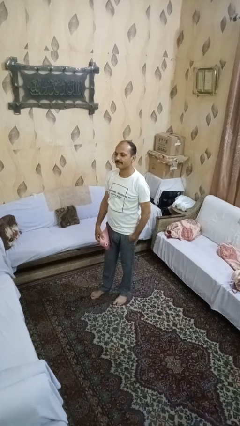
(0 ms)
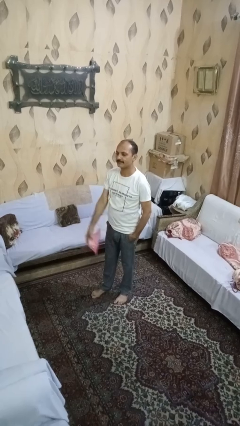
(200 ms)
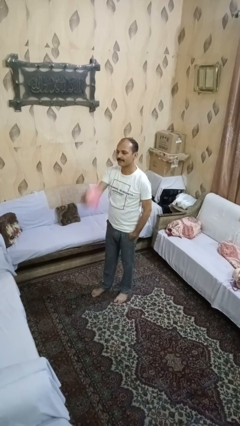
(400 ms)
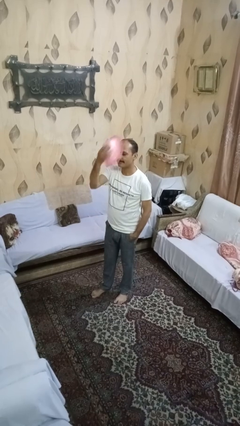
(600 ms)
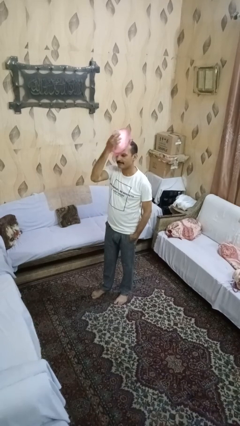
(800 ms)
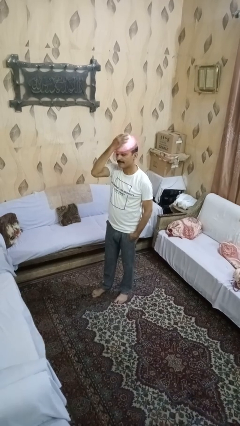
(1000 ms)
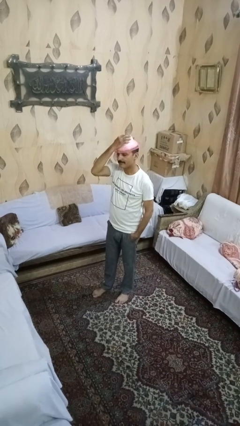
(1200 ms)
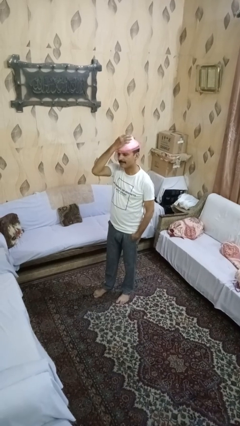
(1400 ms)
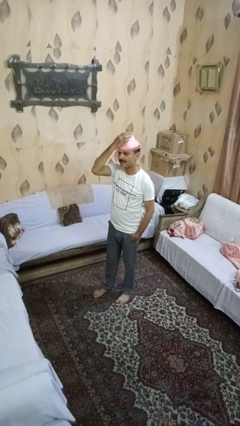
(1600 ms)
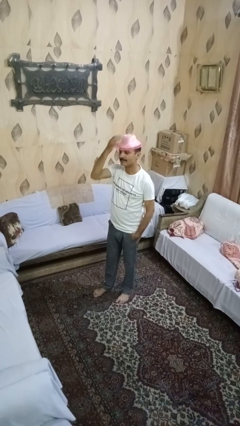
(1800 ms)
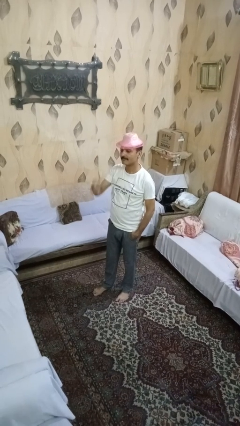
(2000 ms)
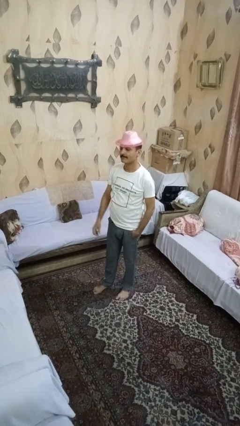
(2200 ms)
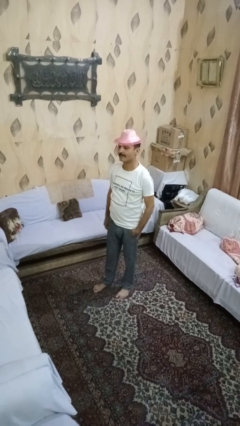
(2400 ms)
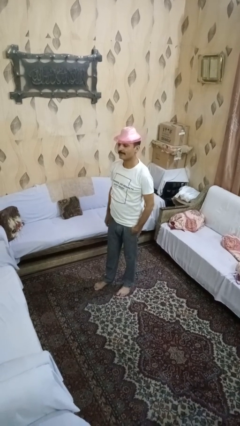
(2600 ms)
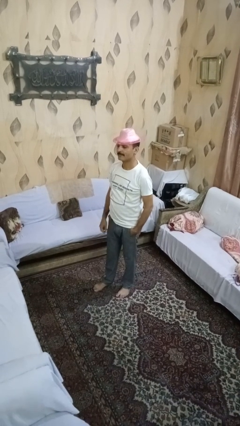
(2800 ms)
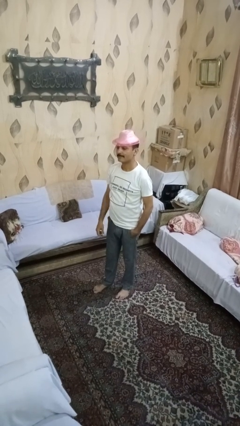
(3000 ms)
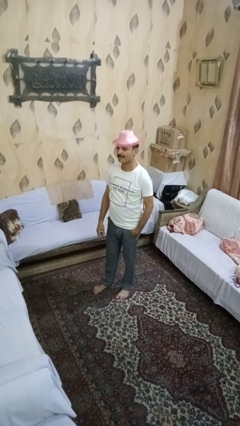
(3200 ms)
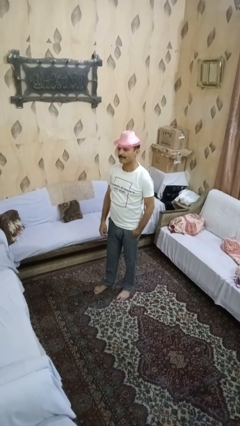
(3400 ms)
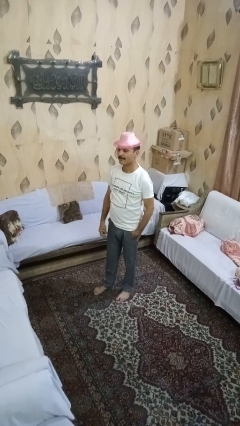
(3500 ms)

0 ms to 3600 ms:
person puts on hat

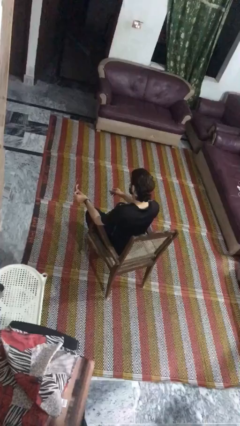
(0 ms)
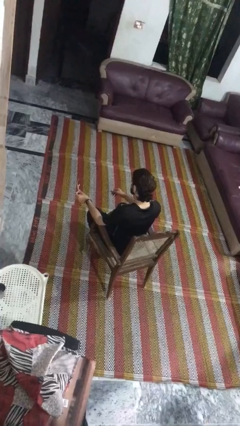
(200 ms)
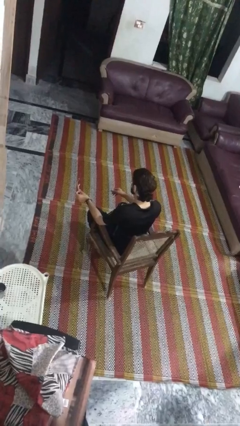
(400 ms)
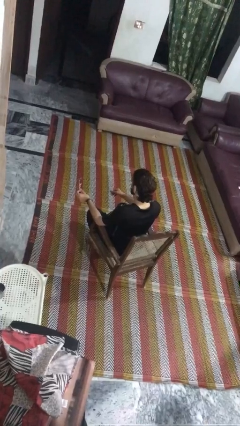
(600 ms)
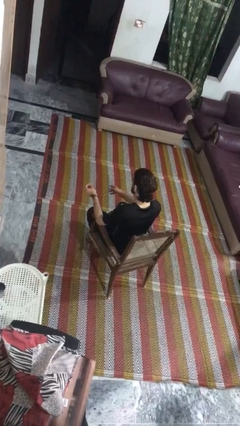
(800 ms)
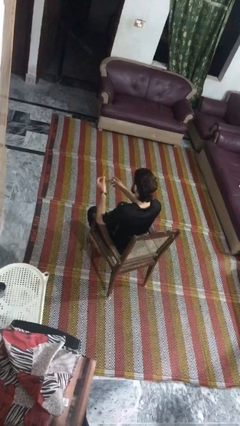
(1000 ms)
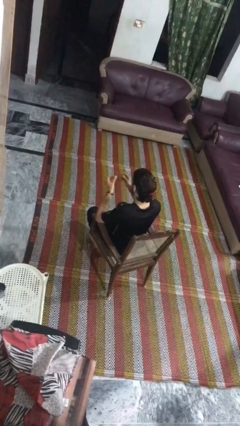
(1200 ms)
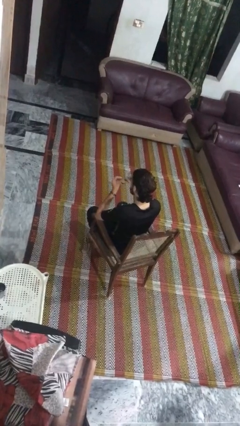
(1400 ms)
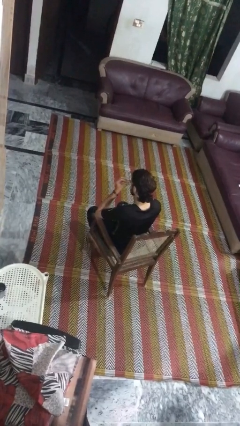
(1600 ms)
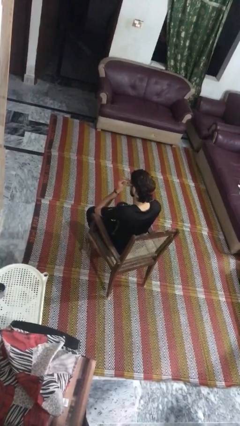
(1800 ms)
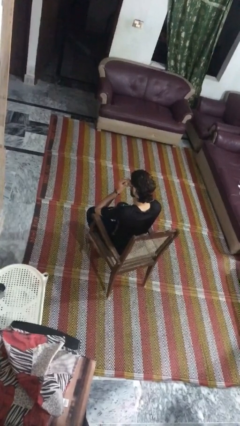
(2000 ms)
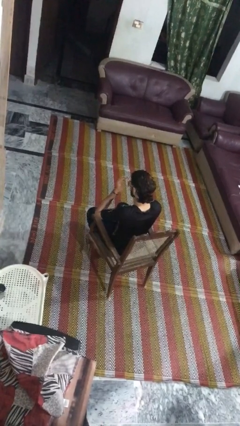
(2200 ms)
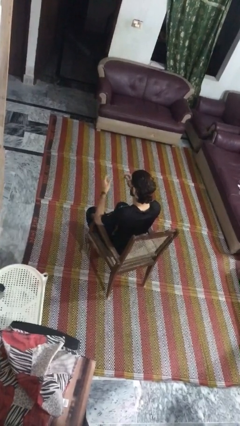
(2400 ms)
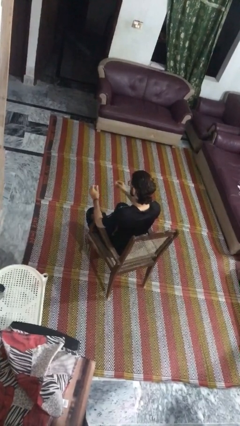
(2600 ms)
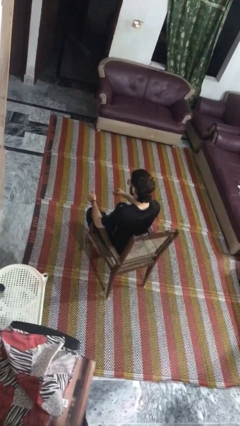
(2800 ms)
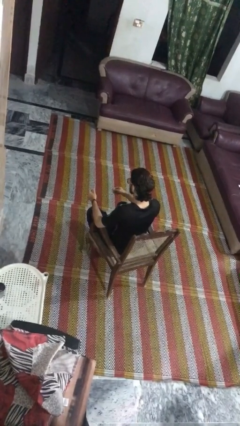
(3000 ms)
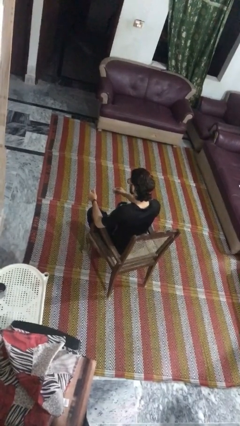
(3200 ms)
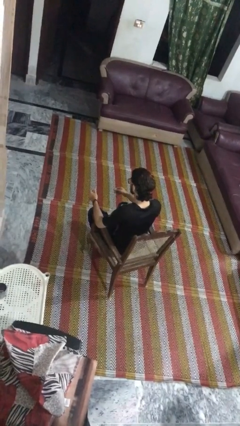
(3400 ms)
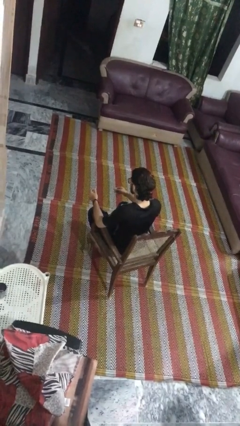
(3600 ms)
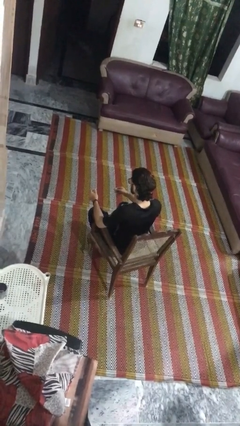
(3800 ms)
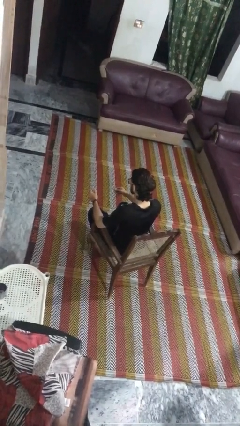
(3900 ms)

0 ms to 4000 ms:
person puts on glasses

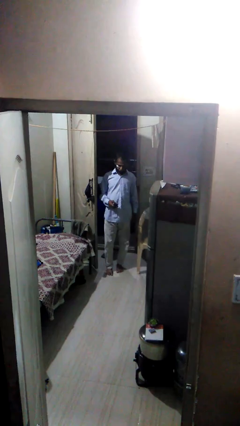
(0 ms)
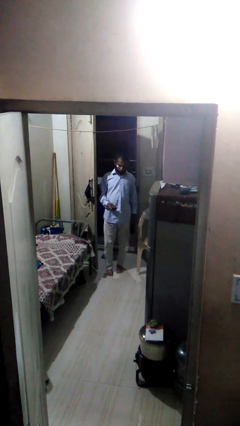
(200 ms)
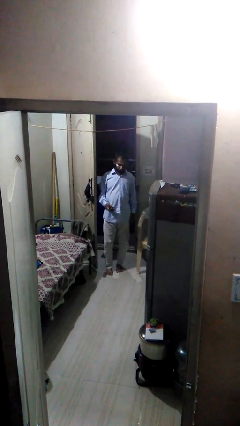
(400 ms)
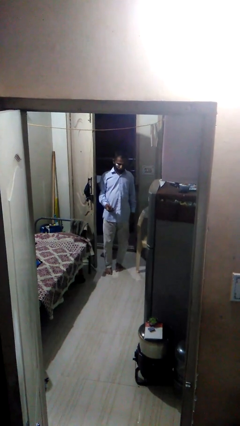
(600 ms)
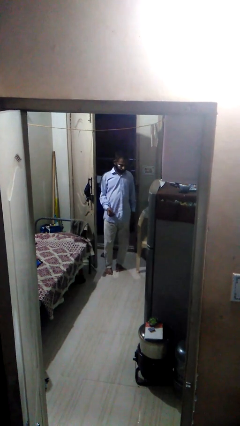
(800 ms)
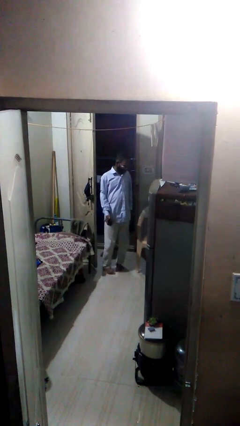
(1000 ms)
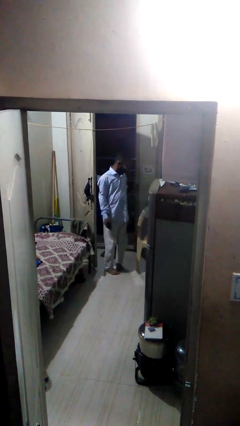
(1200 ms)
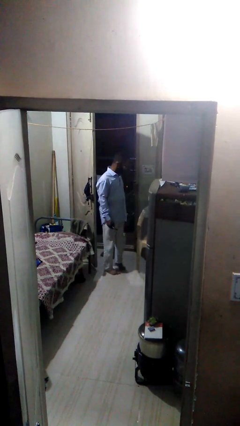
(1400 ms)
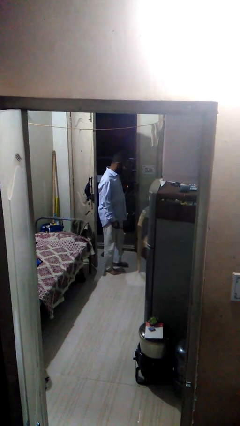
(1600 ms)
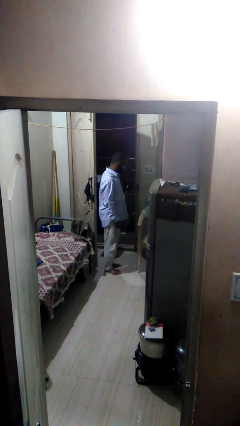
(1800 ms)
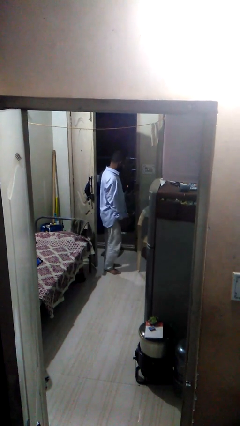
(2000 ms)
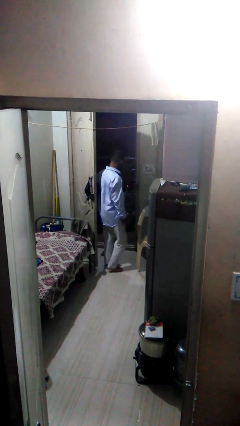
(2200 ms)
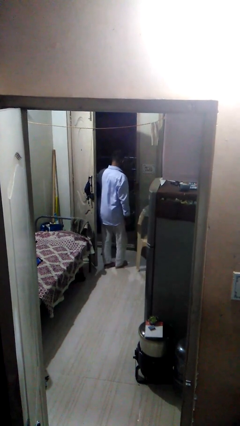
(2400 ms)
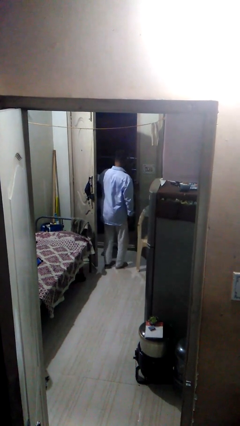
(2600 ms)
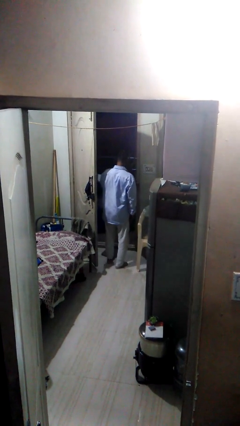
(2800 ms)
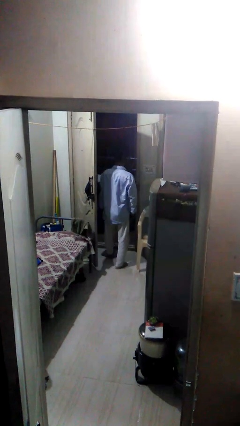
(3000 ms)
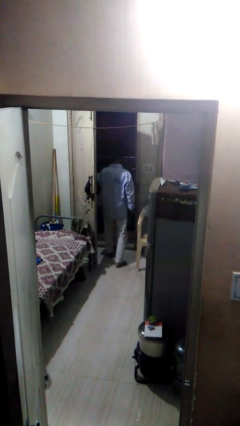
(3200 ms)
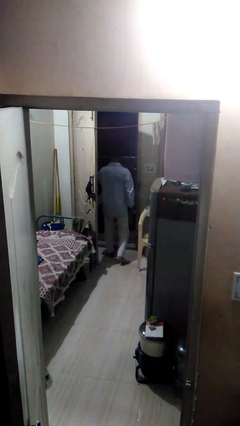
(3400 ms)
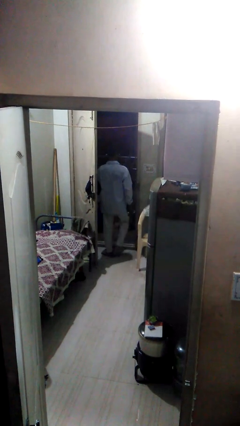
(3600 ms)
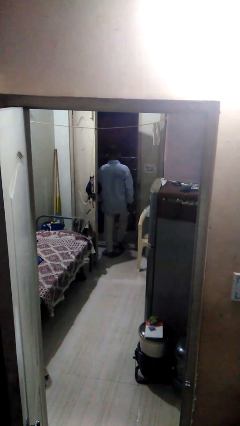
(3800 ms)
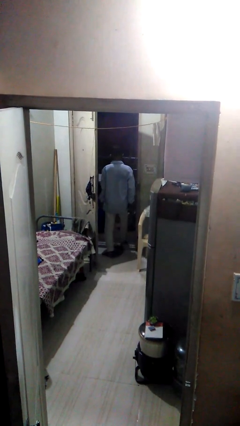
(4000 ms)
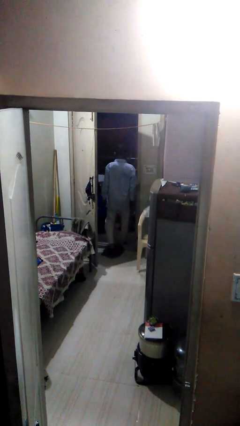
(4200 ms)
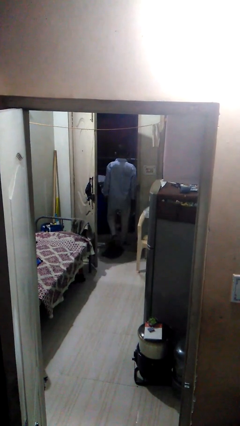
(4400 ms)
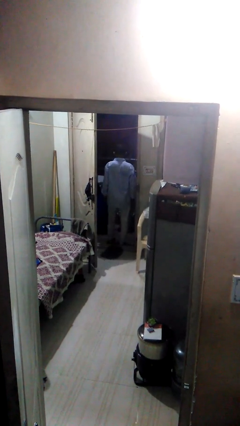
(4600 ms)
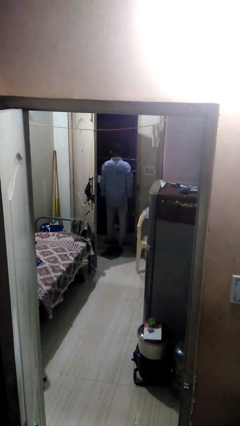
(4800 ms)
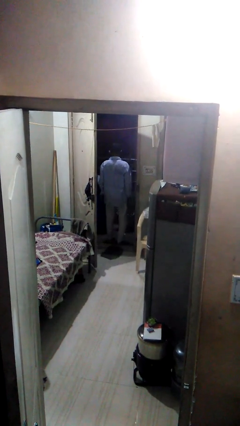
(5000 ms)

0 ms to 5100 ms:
person exits scene through structure

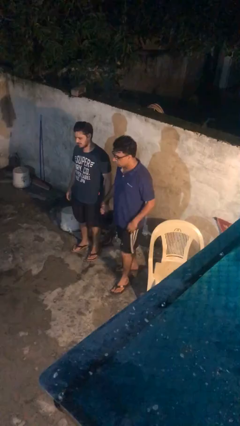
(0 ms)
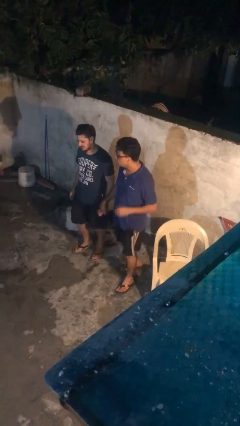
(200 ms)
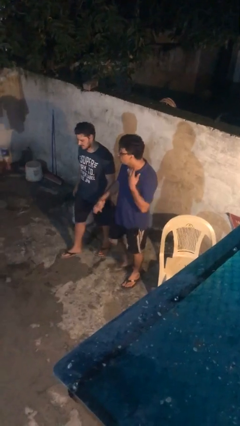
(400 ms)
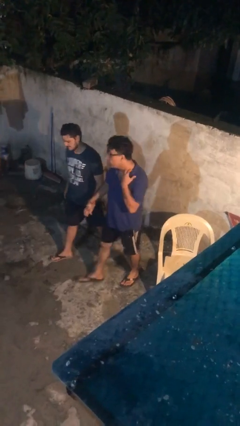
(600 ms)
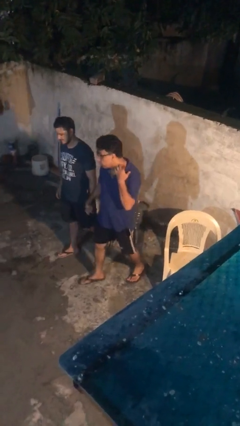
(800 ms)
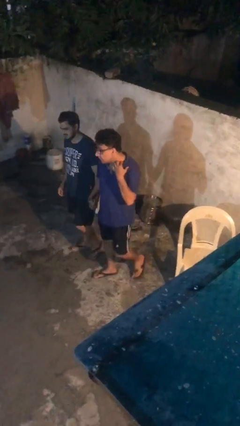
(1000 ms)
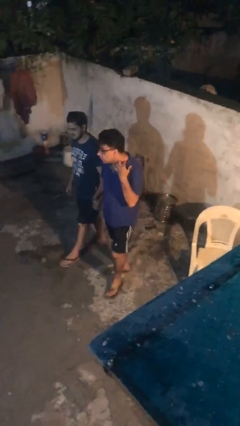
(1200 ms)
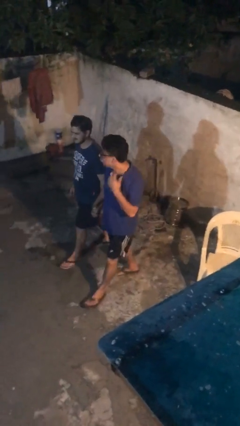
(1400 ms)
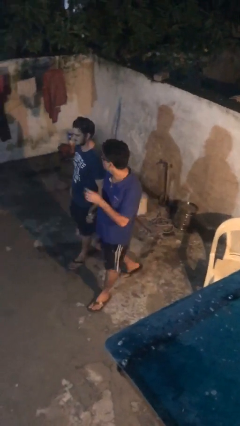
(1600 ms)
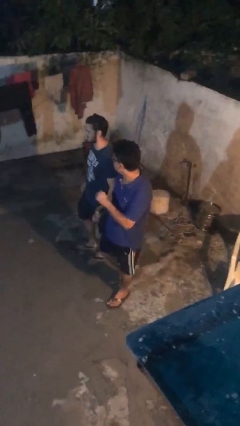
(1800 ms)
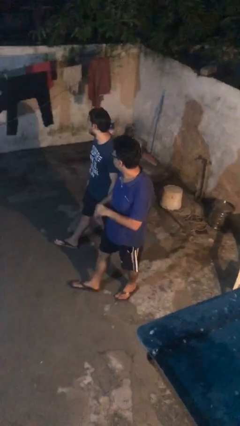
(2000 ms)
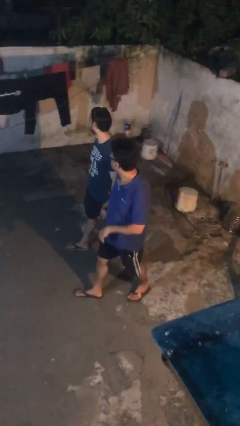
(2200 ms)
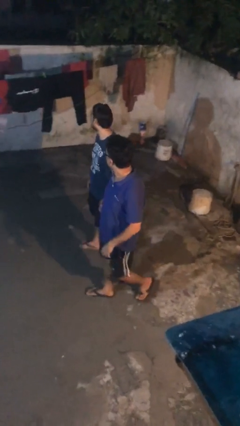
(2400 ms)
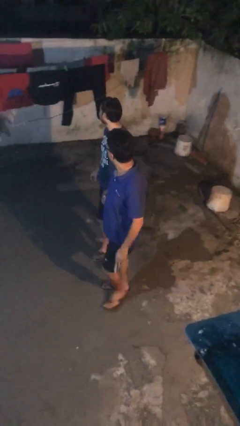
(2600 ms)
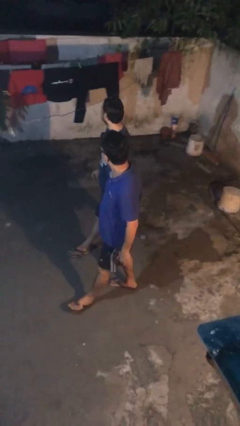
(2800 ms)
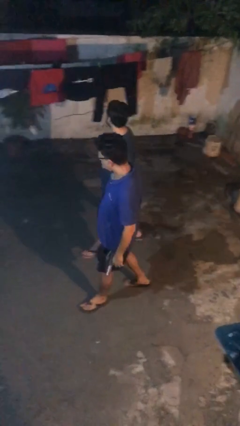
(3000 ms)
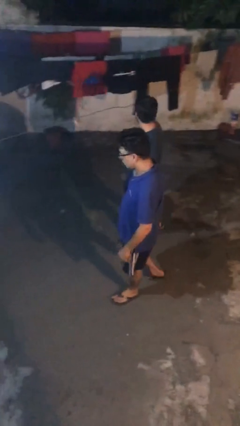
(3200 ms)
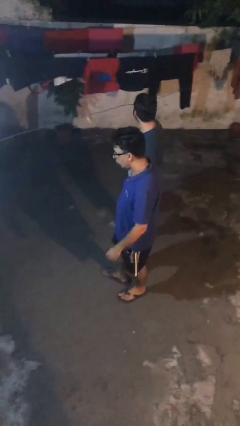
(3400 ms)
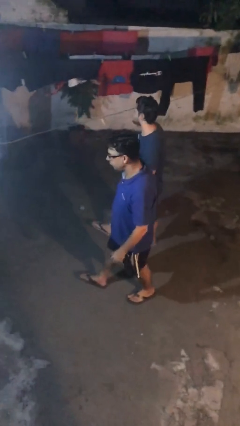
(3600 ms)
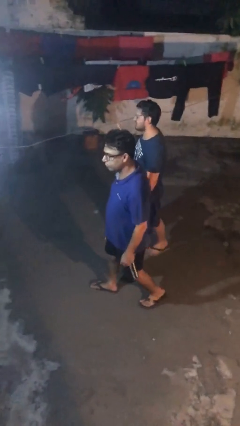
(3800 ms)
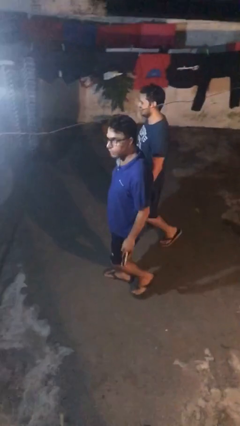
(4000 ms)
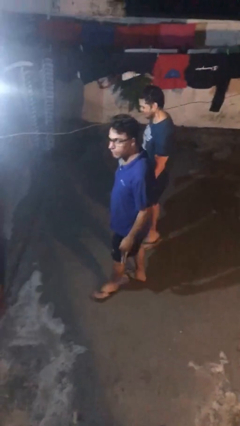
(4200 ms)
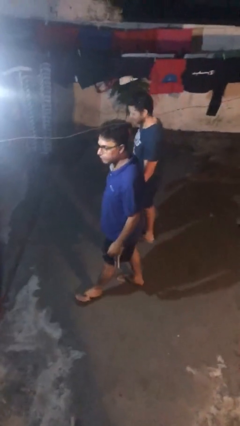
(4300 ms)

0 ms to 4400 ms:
person holds hand

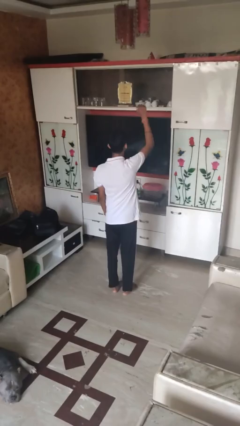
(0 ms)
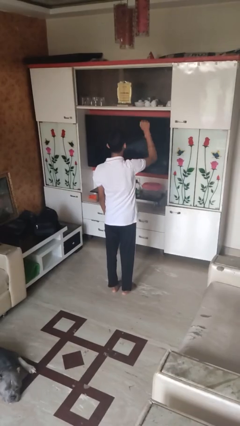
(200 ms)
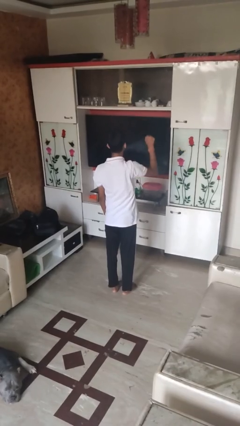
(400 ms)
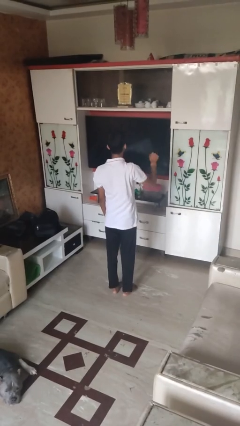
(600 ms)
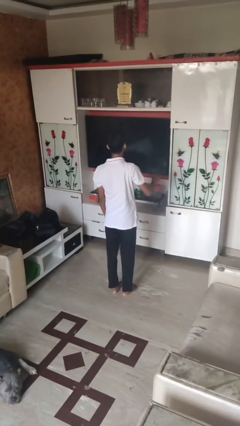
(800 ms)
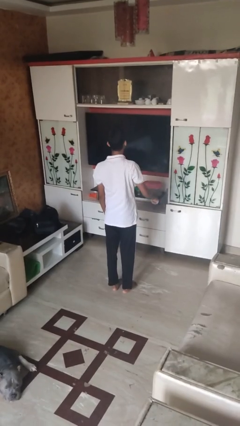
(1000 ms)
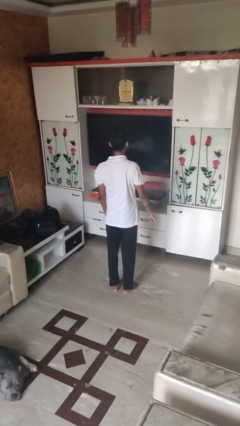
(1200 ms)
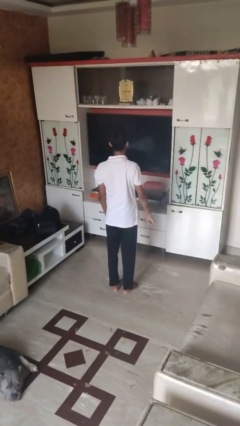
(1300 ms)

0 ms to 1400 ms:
person gestures lower hand
